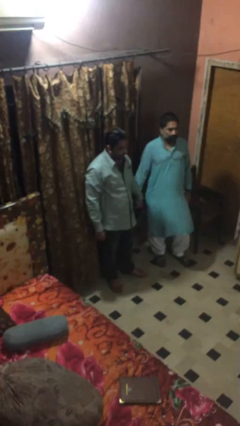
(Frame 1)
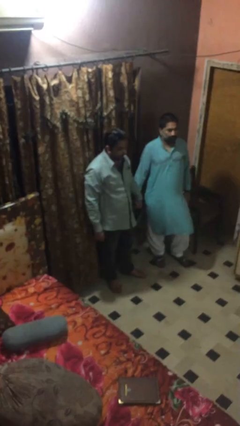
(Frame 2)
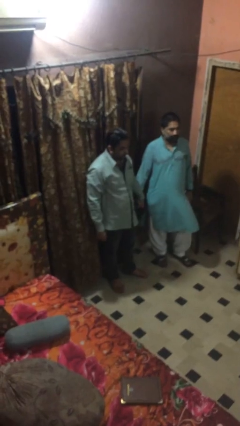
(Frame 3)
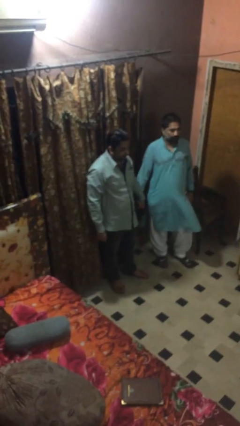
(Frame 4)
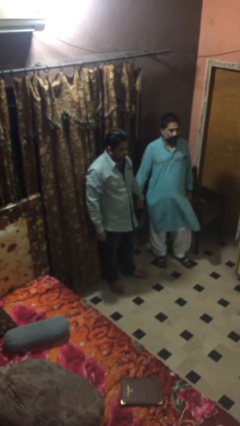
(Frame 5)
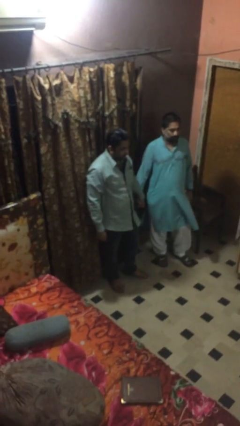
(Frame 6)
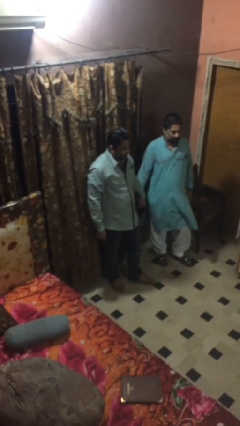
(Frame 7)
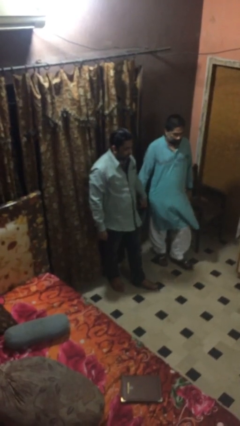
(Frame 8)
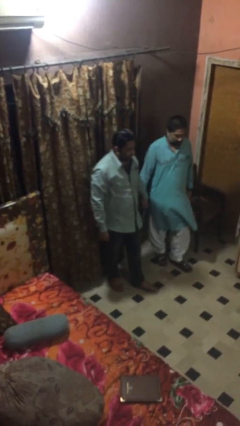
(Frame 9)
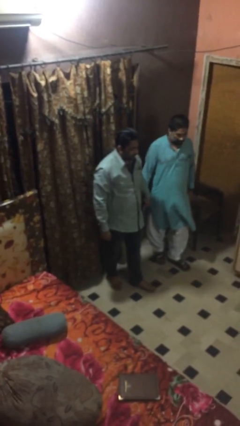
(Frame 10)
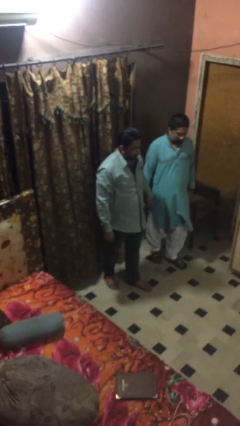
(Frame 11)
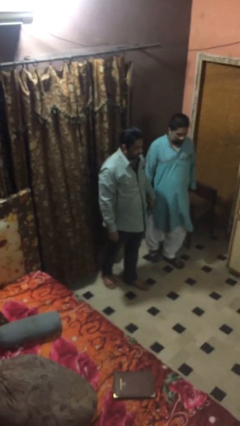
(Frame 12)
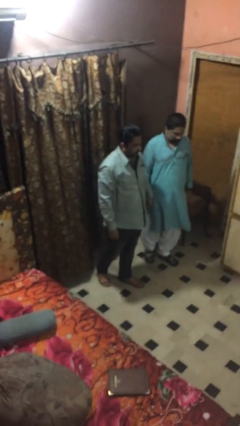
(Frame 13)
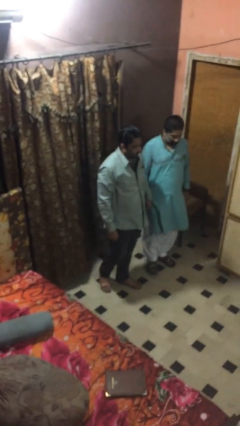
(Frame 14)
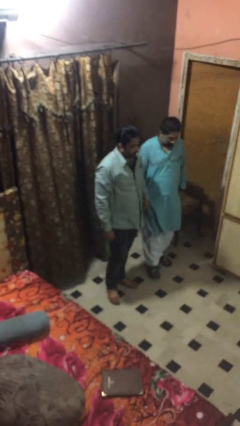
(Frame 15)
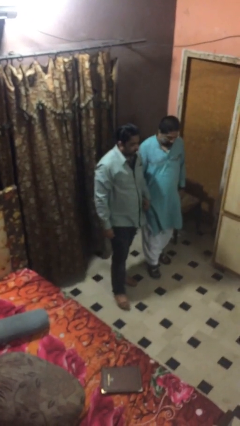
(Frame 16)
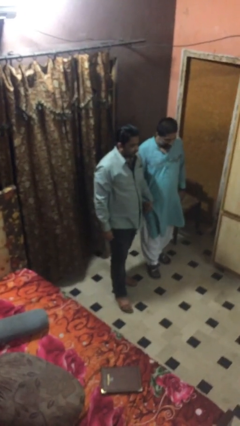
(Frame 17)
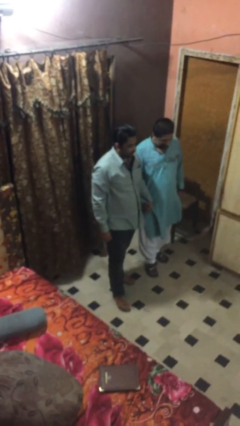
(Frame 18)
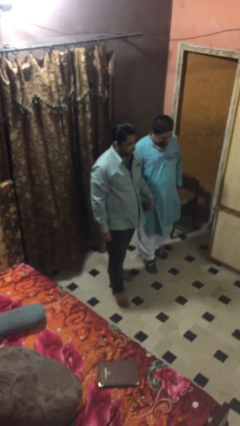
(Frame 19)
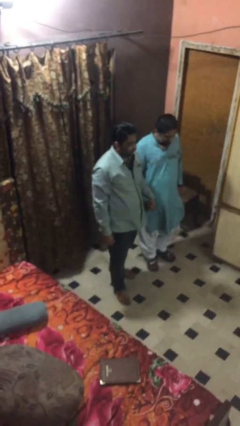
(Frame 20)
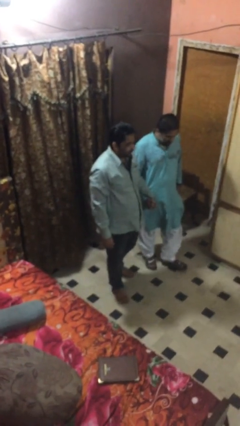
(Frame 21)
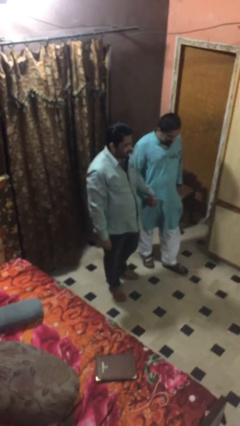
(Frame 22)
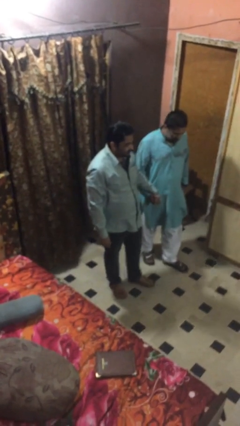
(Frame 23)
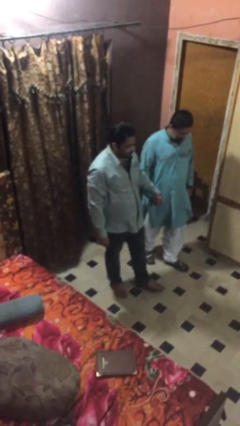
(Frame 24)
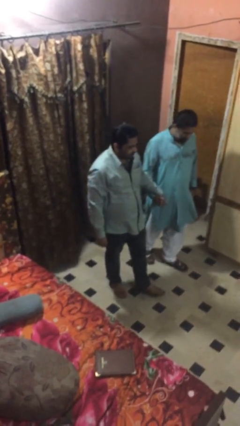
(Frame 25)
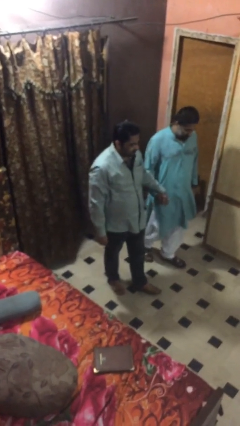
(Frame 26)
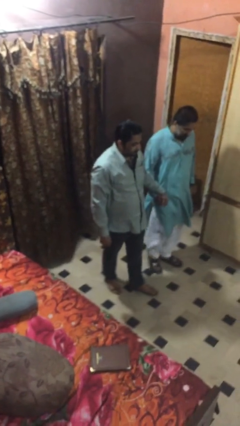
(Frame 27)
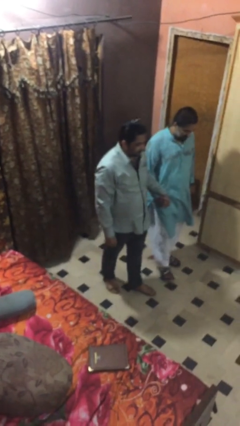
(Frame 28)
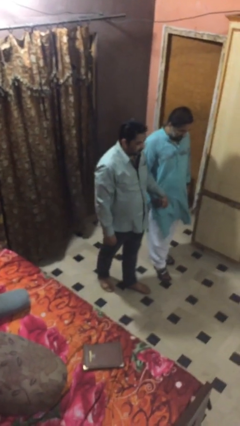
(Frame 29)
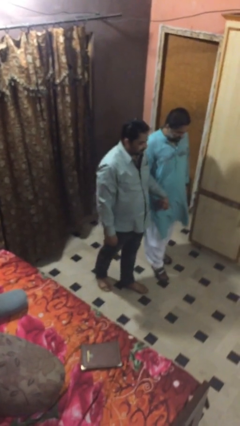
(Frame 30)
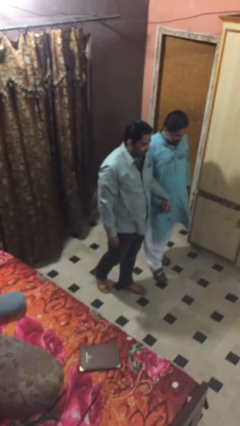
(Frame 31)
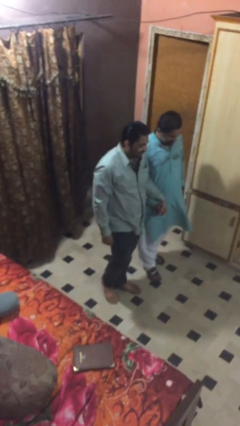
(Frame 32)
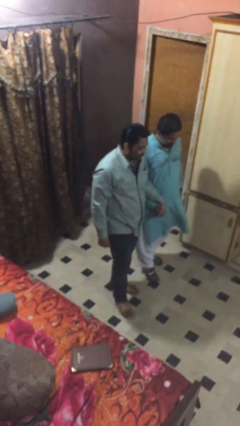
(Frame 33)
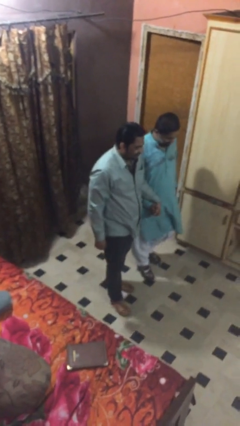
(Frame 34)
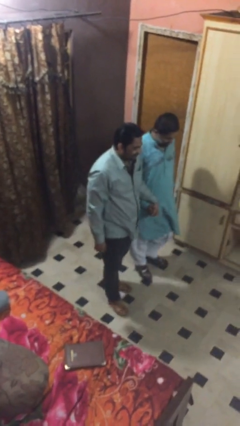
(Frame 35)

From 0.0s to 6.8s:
person holds hand

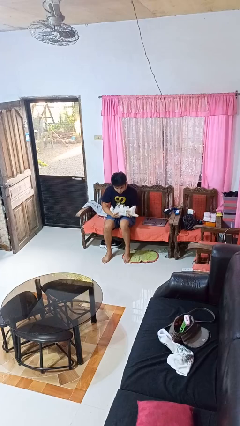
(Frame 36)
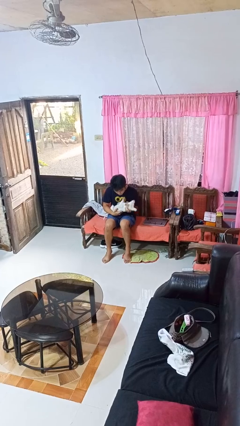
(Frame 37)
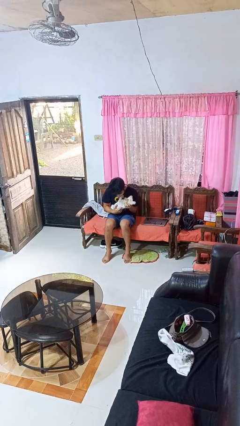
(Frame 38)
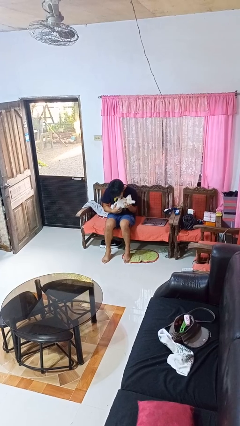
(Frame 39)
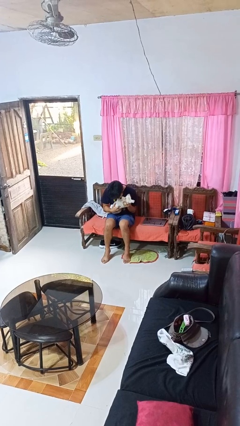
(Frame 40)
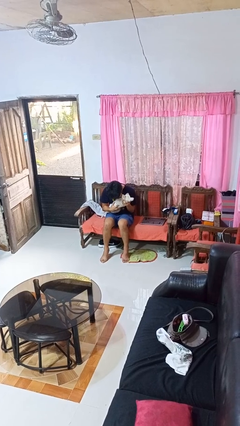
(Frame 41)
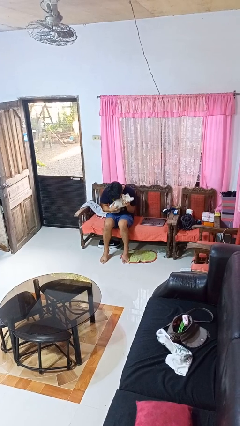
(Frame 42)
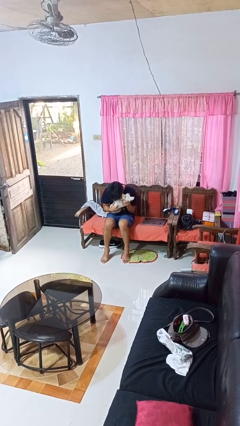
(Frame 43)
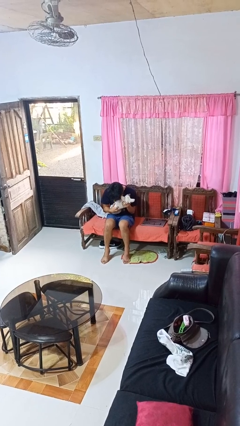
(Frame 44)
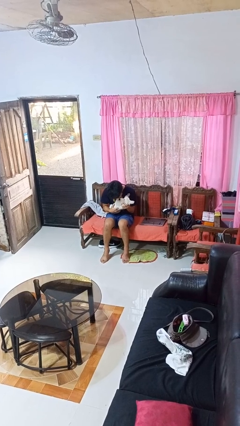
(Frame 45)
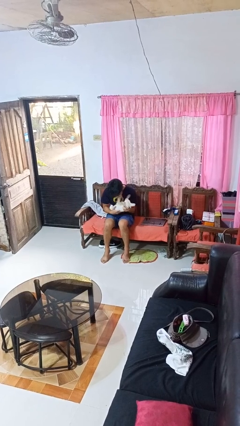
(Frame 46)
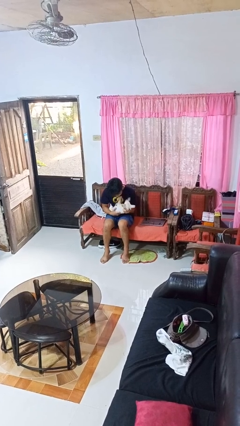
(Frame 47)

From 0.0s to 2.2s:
person hugs dog

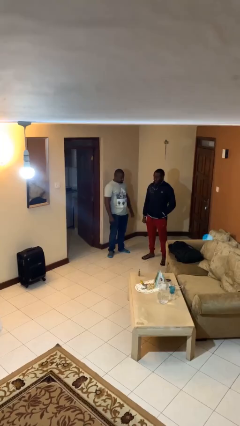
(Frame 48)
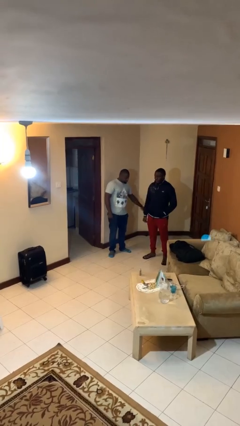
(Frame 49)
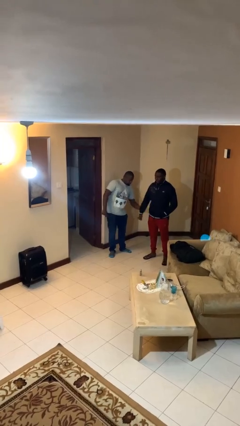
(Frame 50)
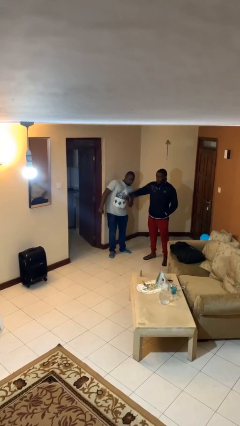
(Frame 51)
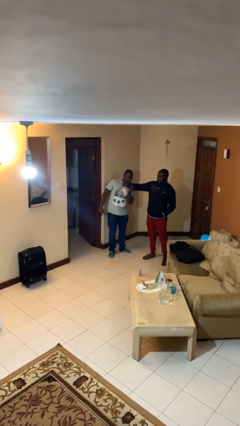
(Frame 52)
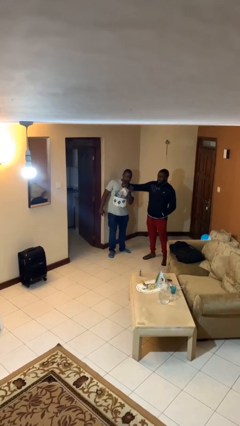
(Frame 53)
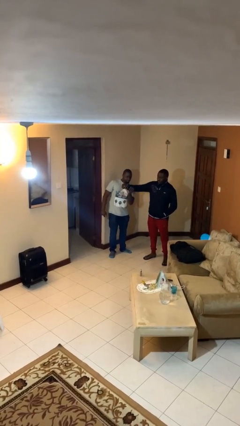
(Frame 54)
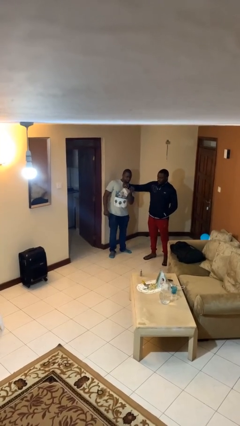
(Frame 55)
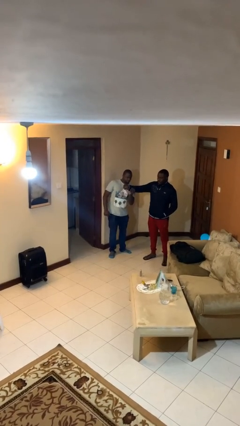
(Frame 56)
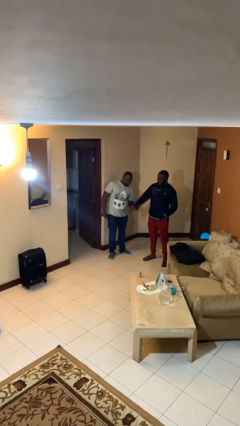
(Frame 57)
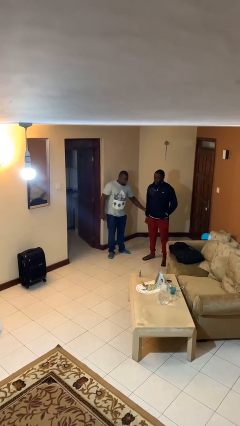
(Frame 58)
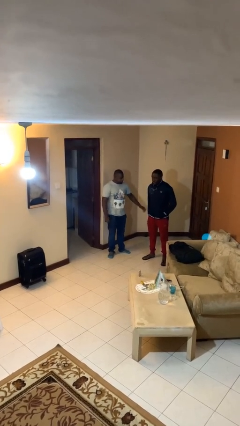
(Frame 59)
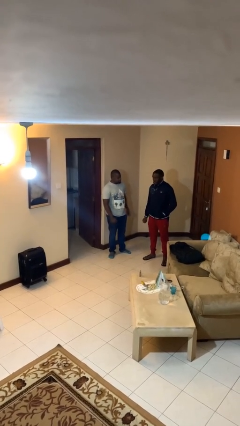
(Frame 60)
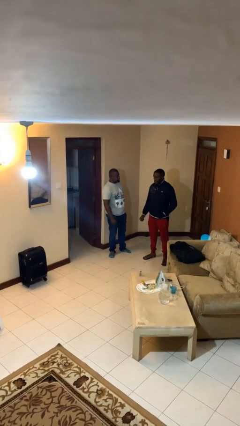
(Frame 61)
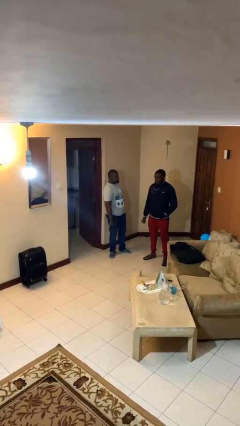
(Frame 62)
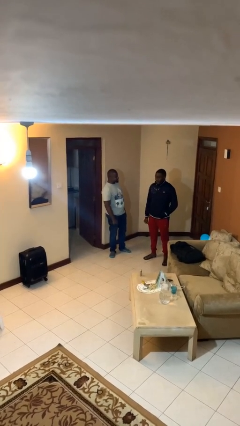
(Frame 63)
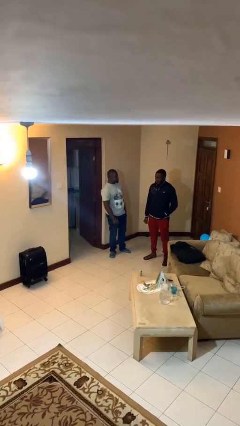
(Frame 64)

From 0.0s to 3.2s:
person grabs person by forearm

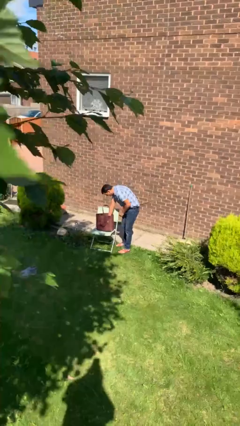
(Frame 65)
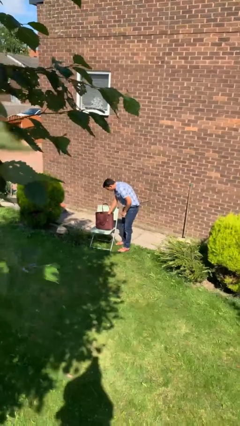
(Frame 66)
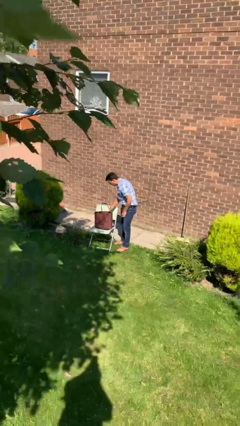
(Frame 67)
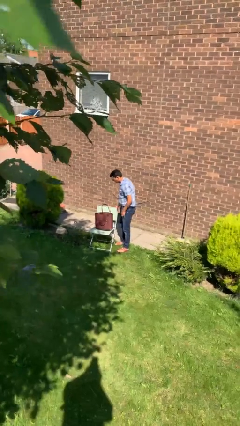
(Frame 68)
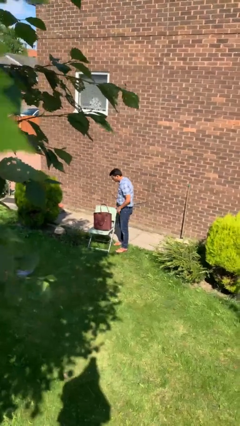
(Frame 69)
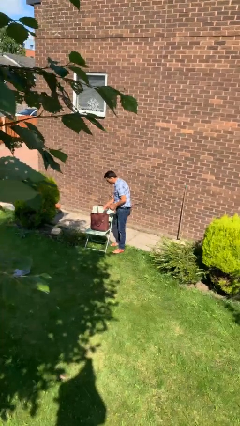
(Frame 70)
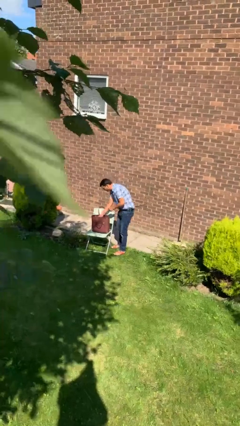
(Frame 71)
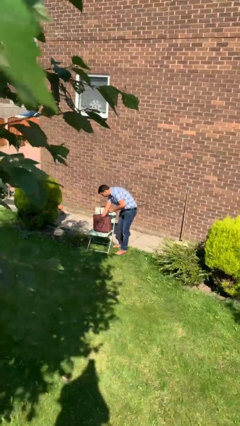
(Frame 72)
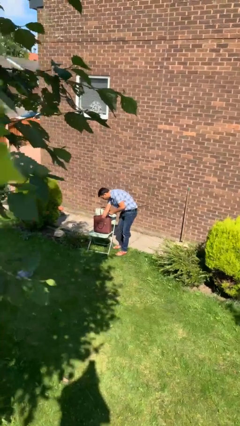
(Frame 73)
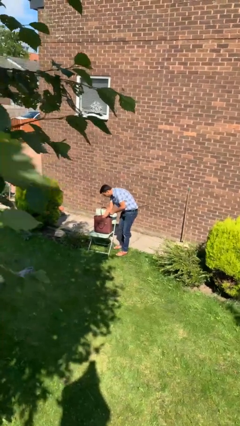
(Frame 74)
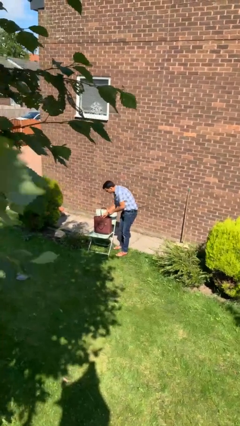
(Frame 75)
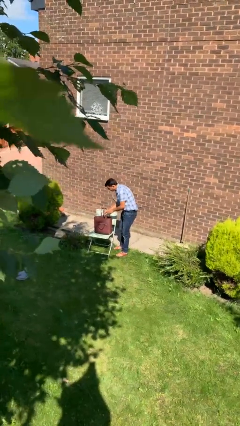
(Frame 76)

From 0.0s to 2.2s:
person searches in purse

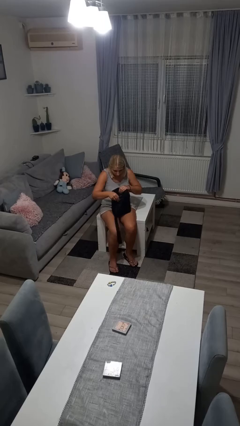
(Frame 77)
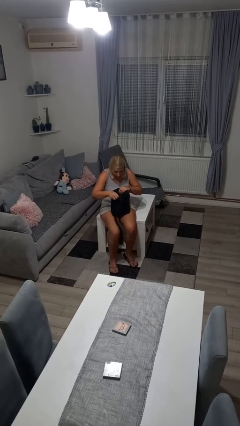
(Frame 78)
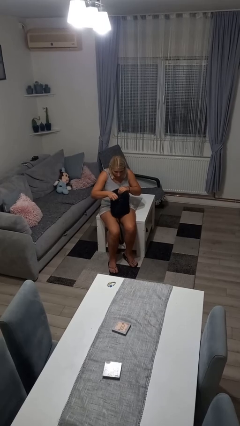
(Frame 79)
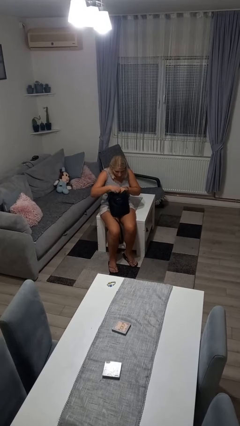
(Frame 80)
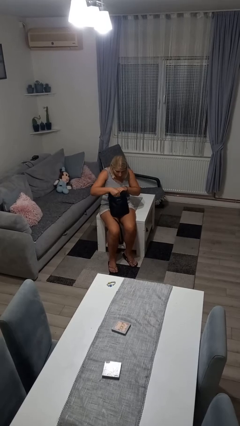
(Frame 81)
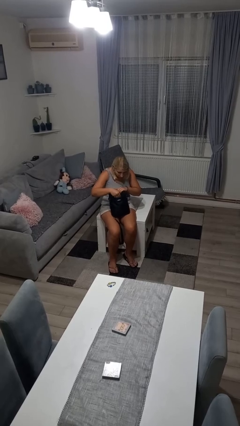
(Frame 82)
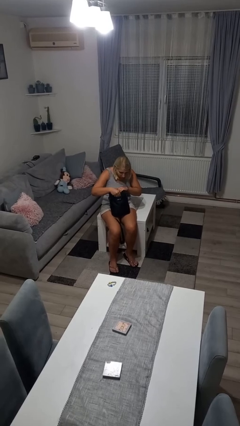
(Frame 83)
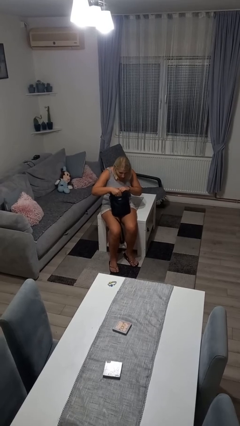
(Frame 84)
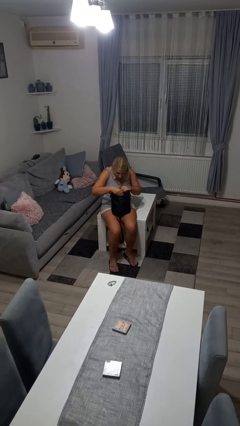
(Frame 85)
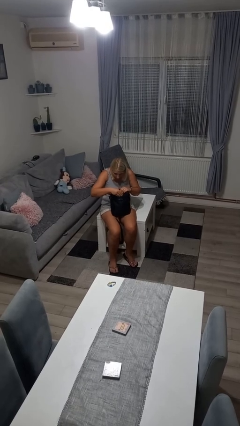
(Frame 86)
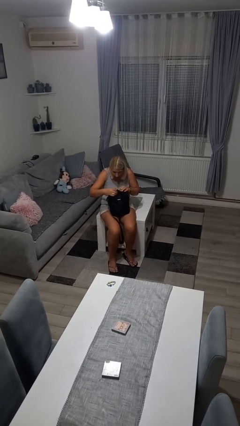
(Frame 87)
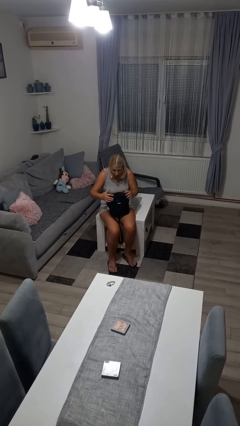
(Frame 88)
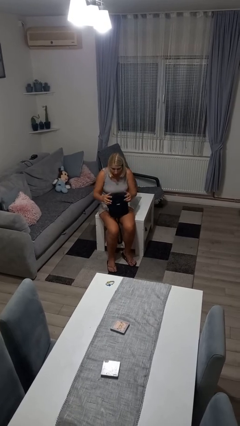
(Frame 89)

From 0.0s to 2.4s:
person searches in bag

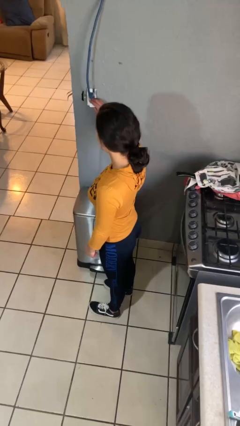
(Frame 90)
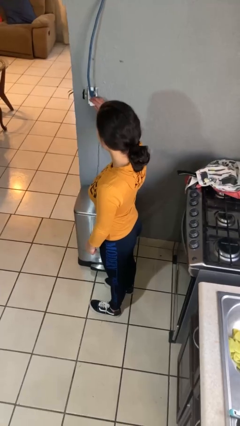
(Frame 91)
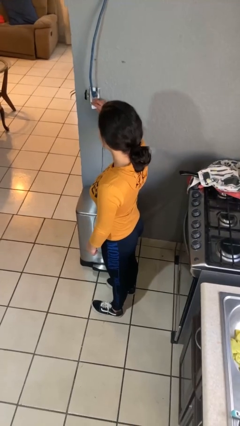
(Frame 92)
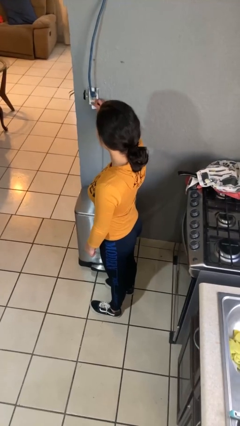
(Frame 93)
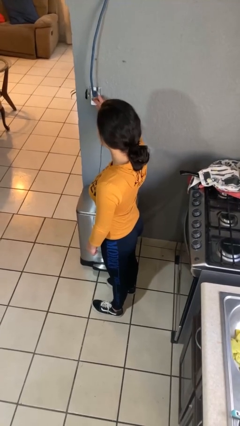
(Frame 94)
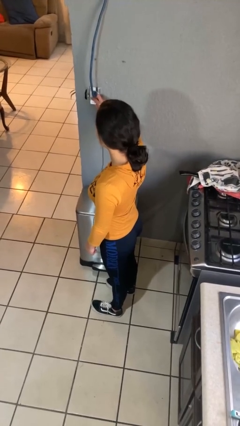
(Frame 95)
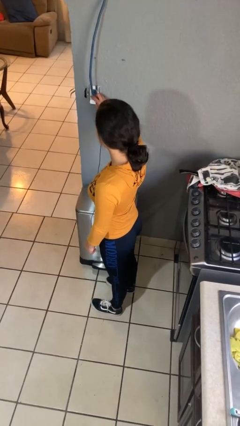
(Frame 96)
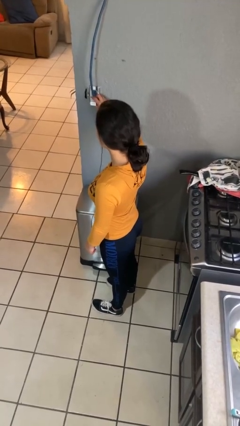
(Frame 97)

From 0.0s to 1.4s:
person plugs into electrical socket
